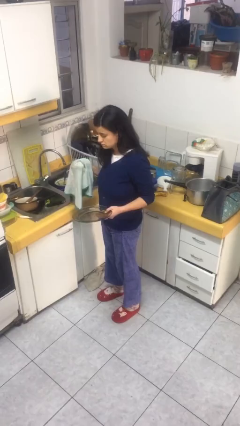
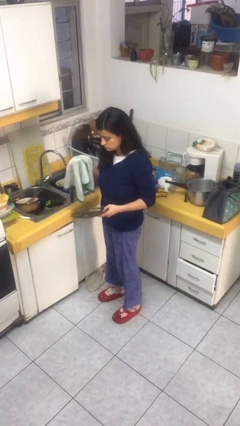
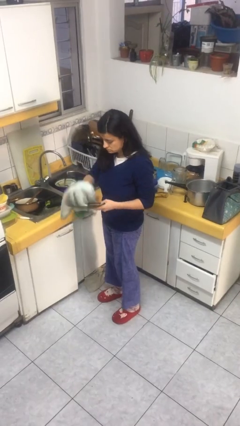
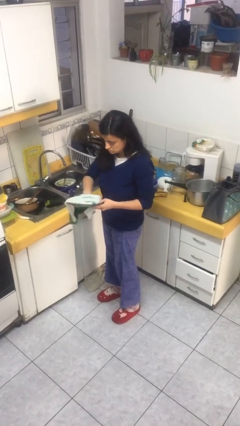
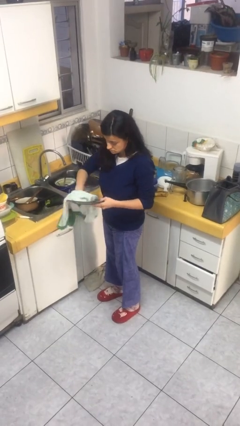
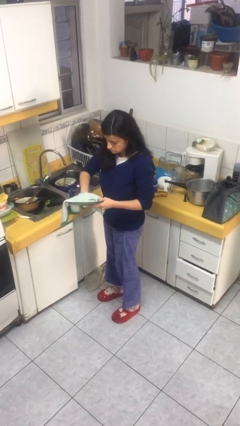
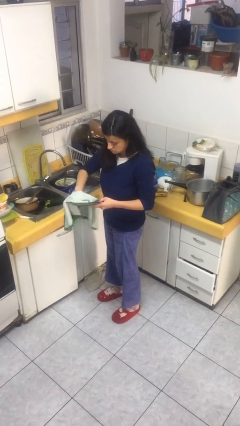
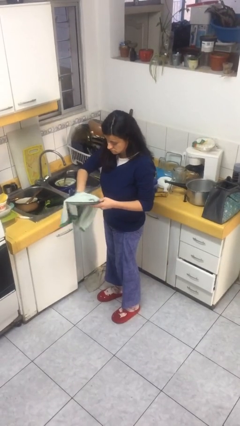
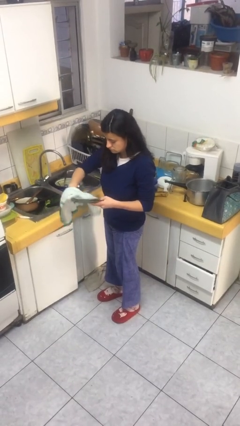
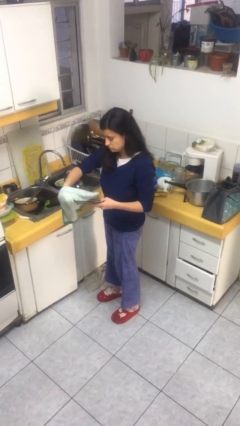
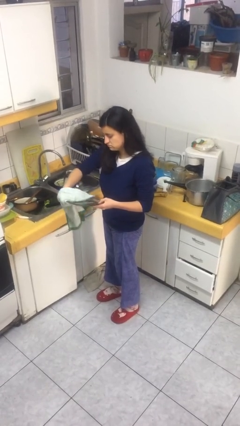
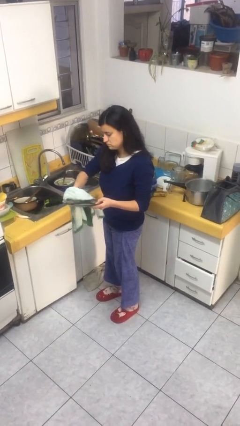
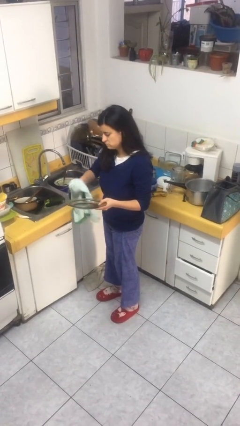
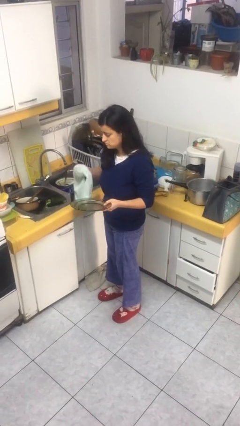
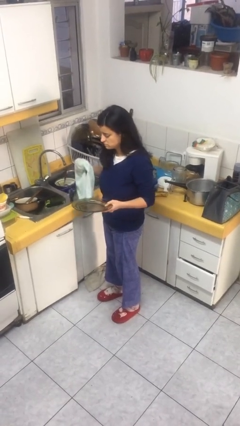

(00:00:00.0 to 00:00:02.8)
person dries dish

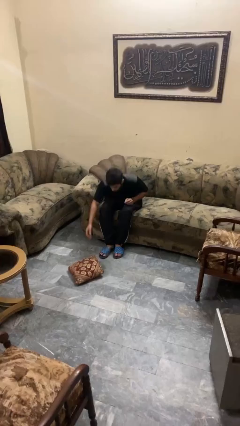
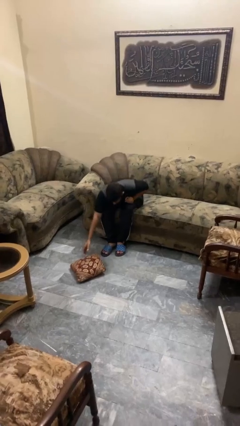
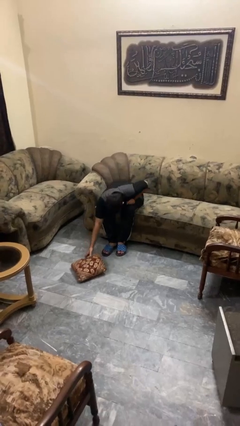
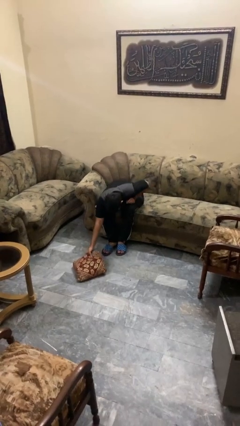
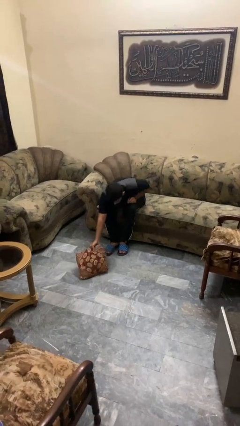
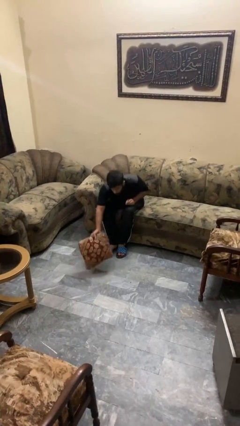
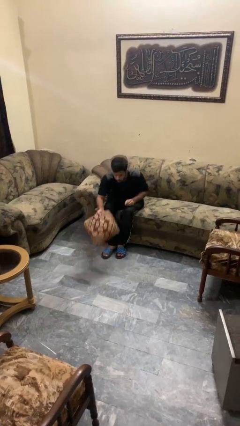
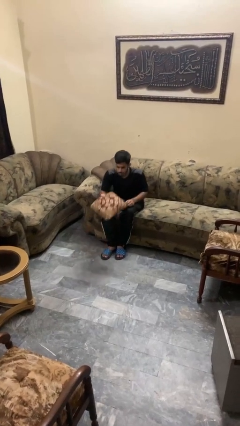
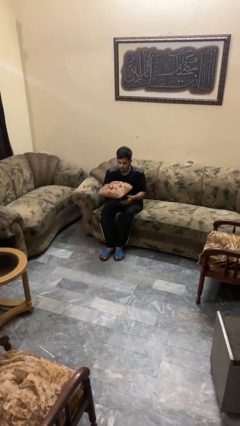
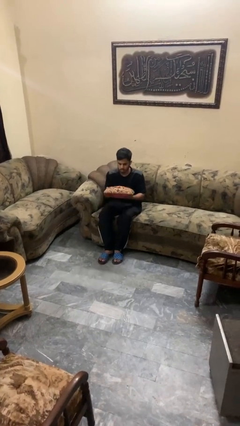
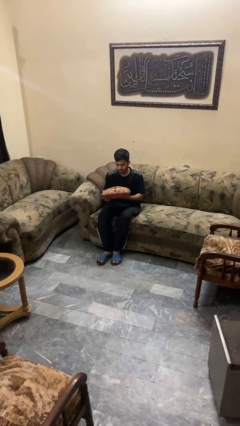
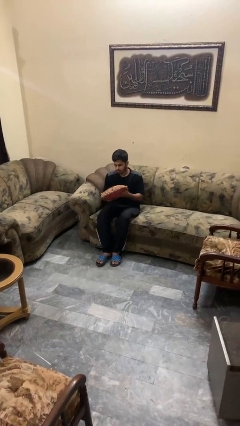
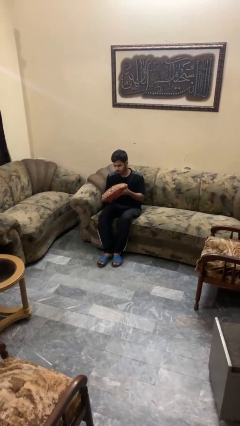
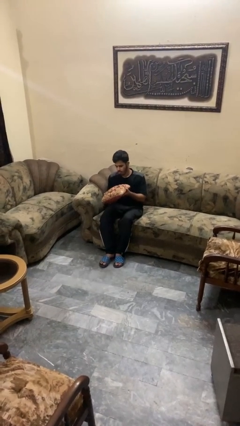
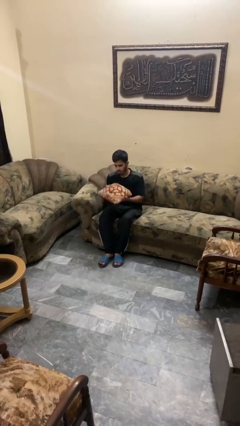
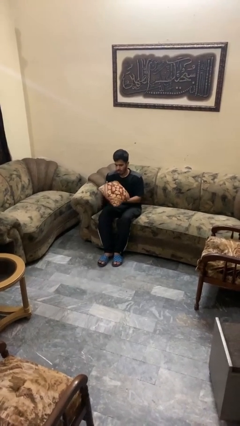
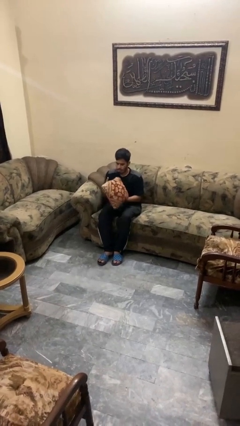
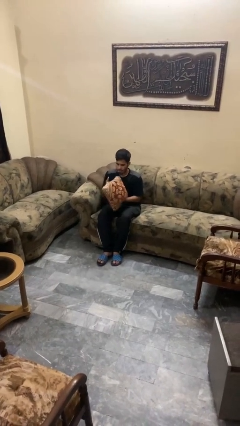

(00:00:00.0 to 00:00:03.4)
person picks up object from floor

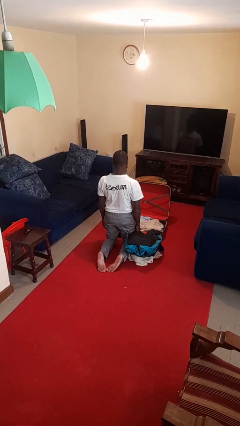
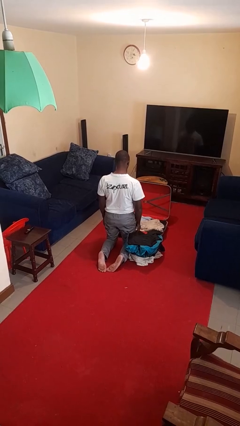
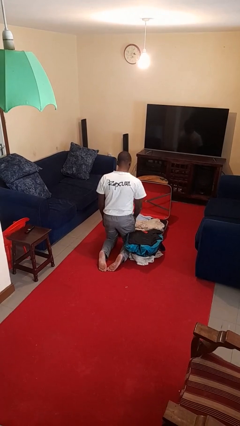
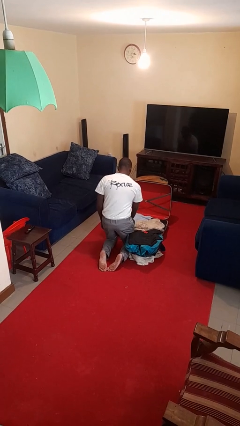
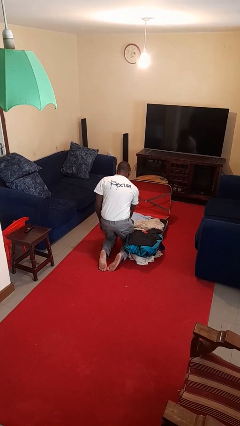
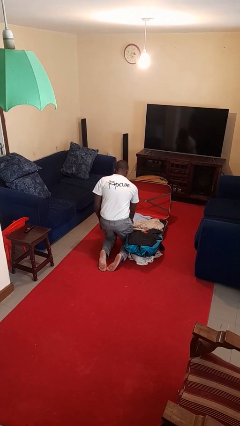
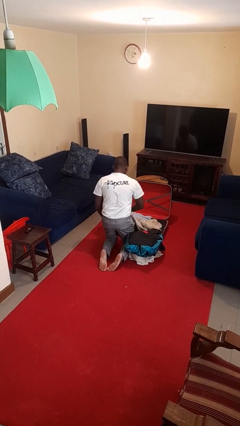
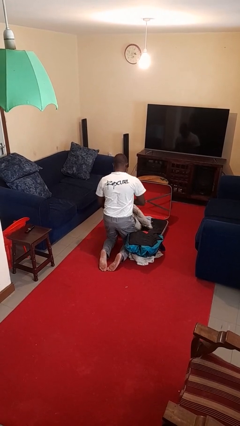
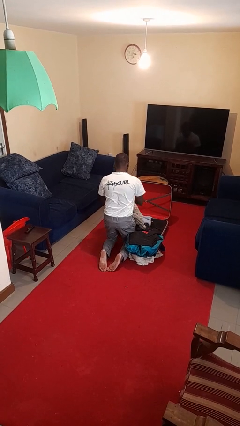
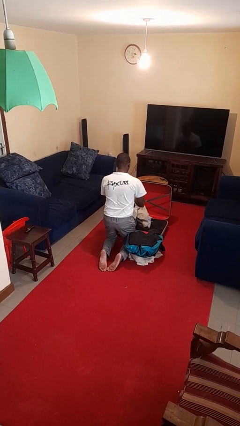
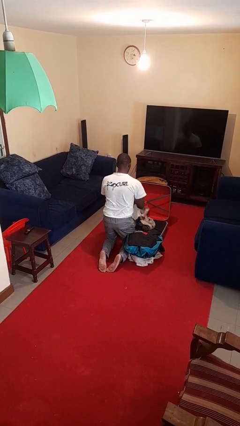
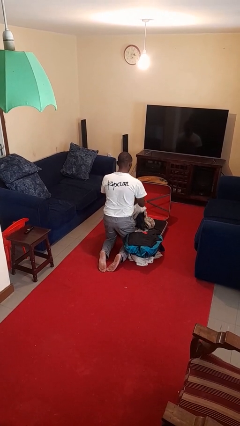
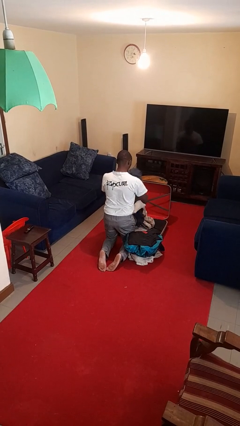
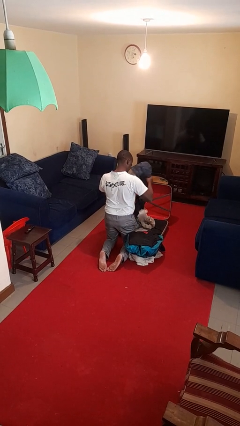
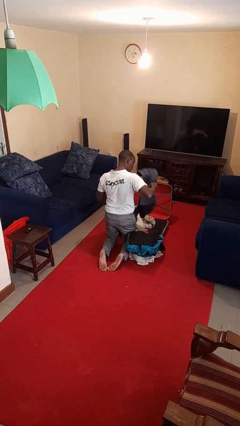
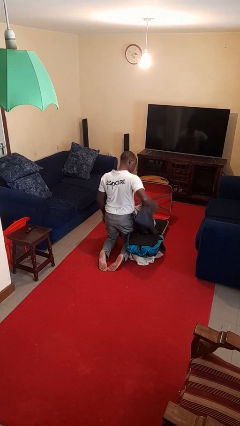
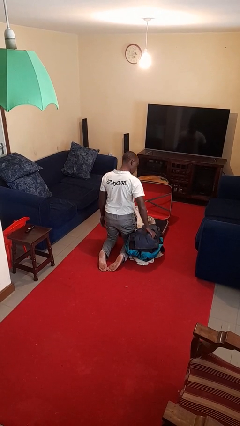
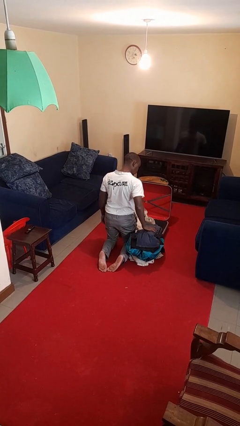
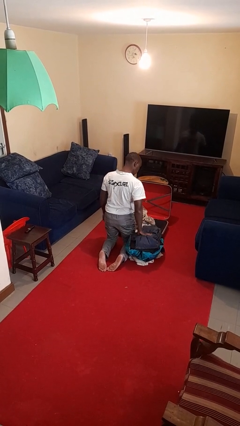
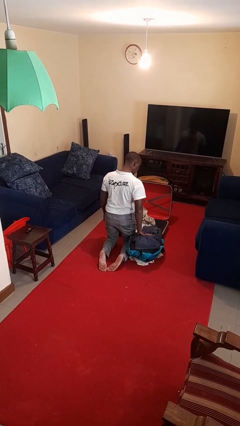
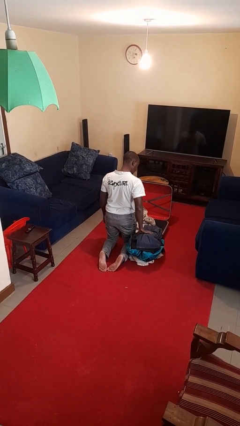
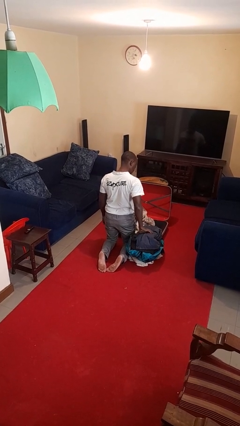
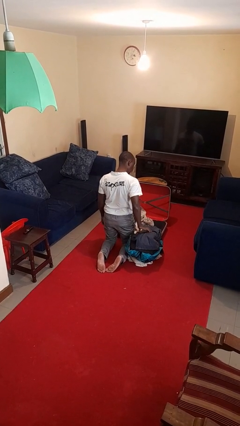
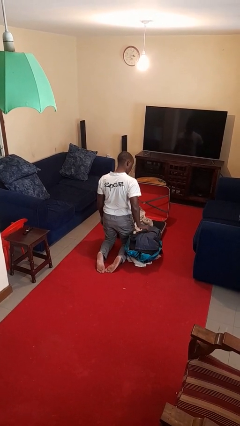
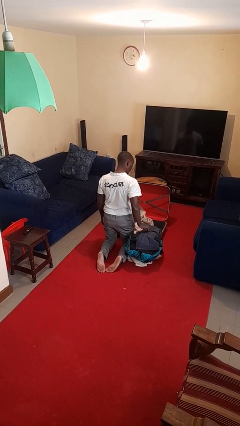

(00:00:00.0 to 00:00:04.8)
person unloads clothes from suitcase

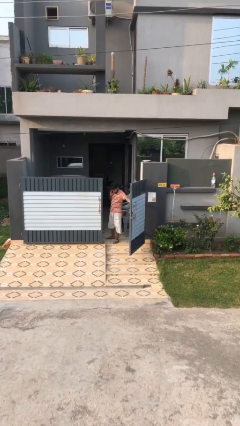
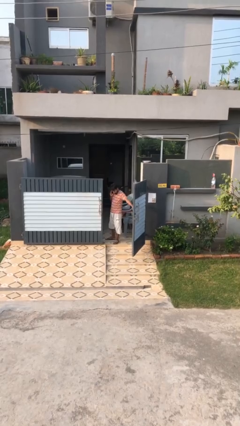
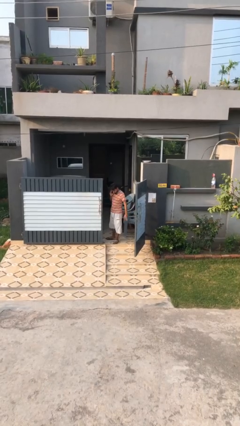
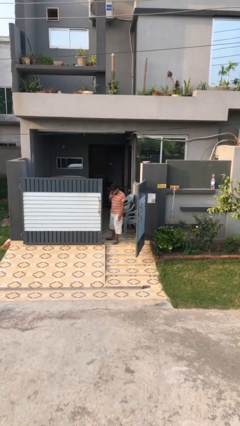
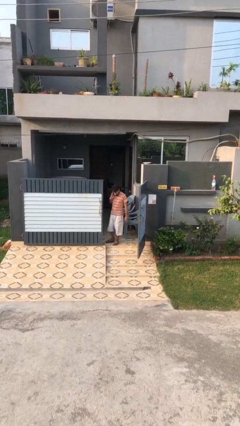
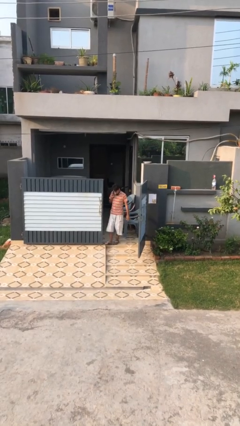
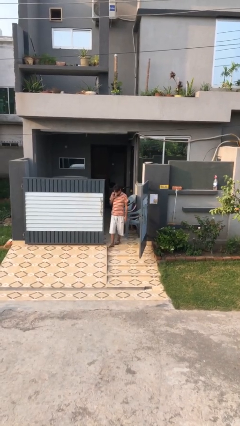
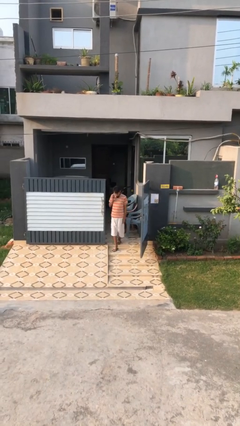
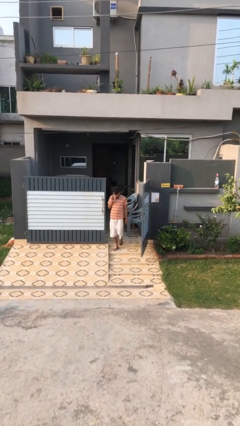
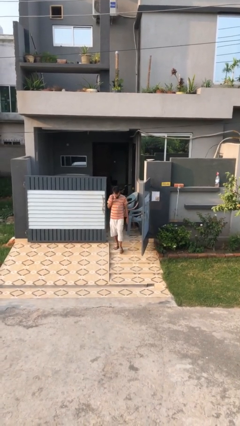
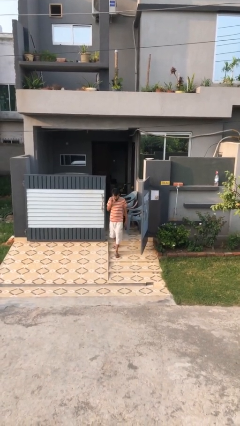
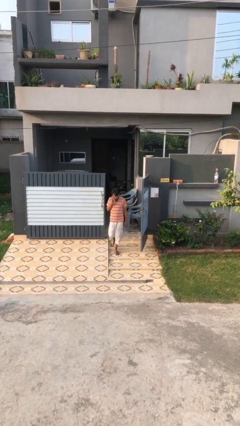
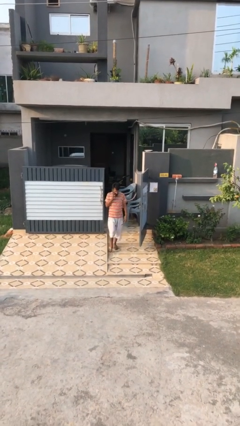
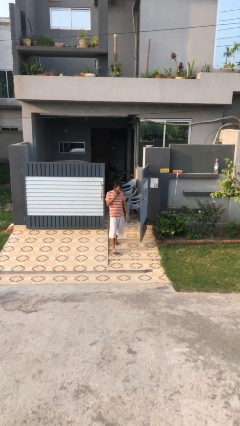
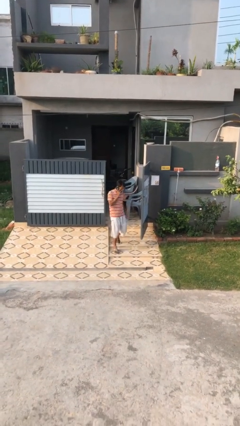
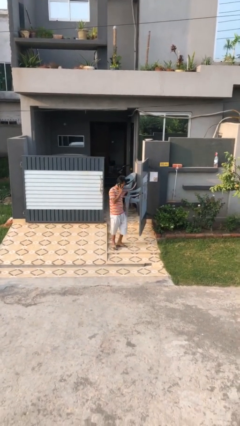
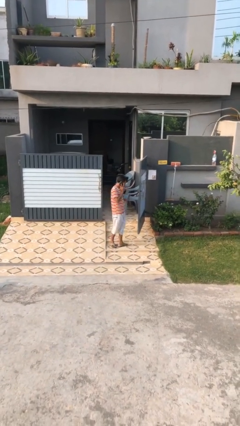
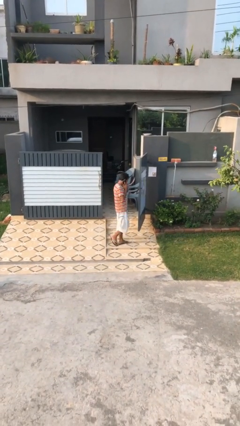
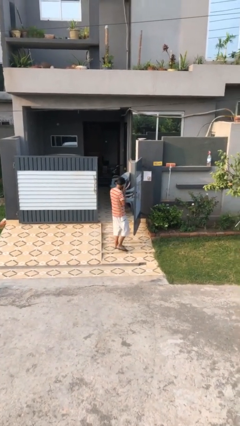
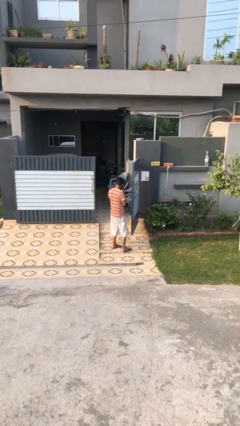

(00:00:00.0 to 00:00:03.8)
person enters scene through structure

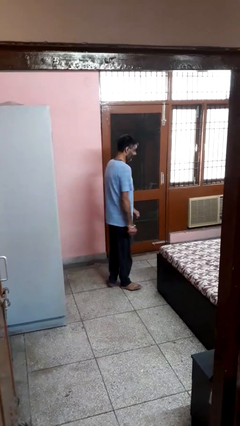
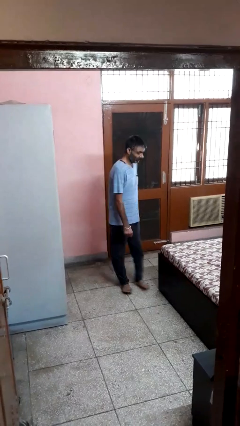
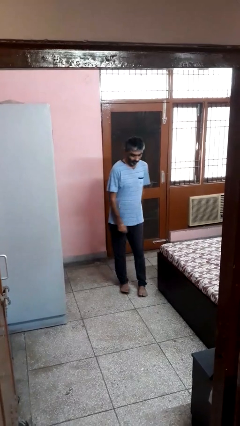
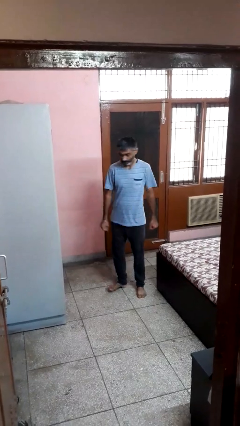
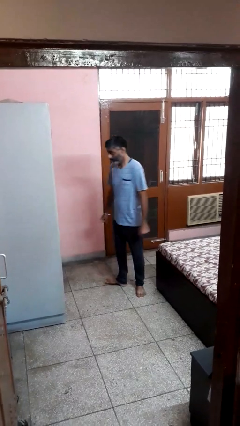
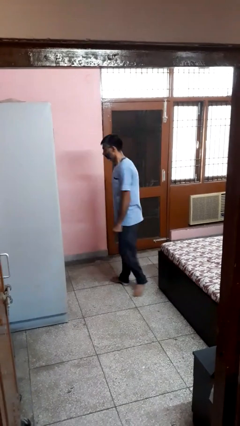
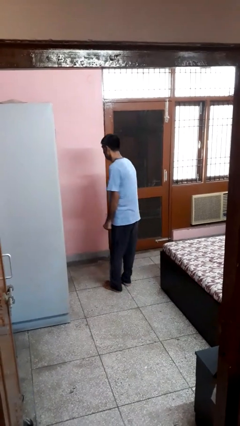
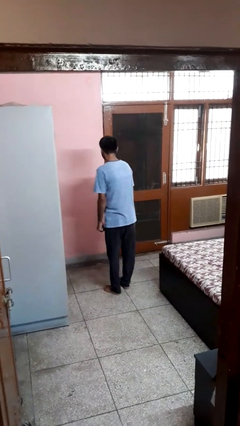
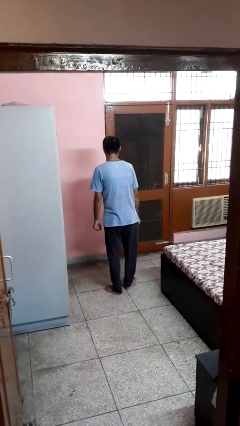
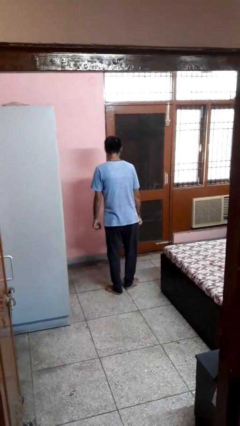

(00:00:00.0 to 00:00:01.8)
person twirls

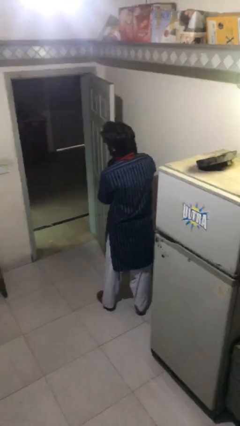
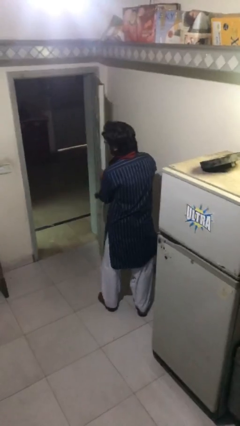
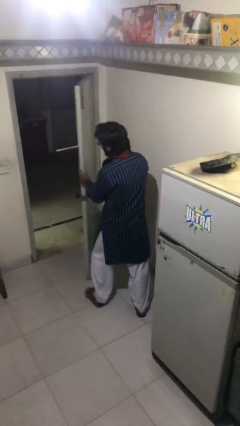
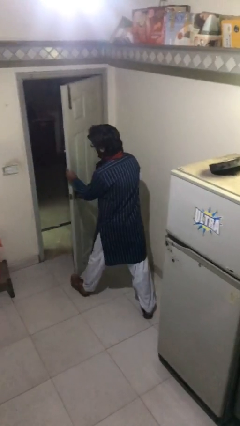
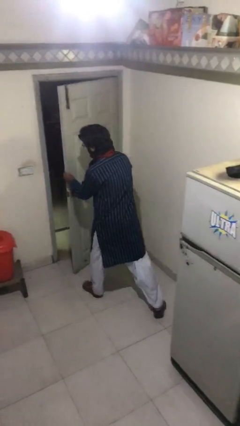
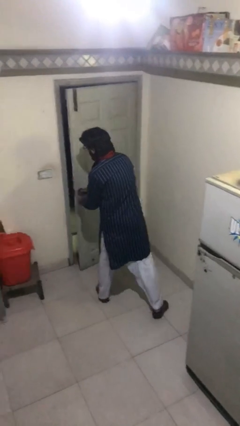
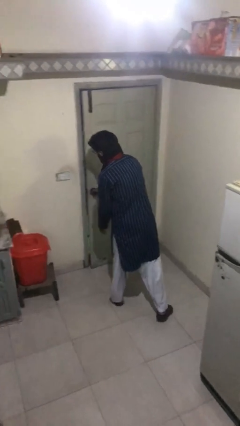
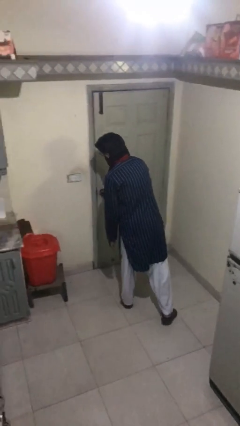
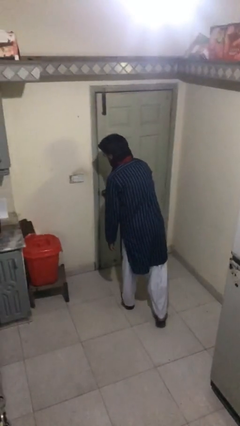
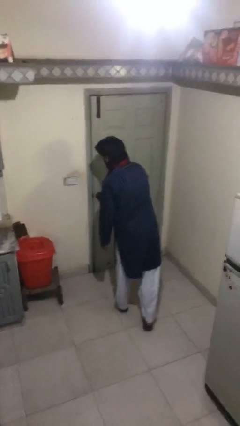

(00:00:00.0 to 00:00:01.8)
person closes facility door
